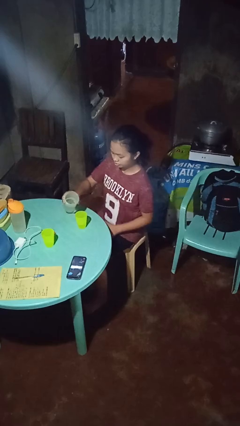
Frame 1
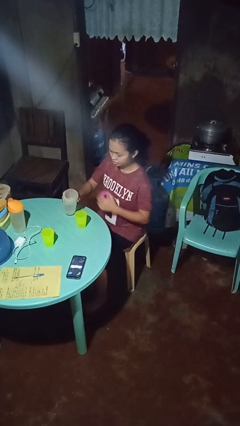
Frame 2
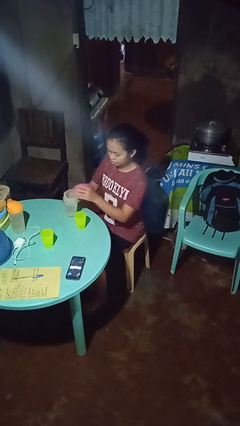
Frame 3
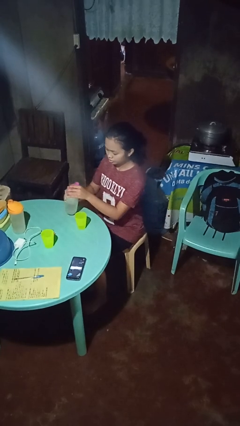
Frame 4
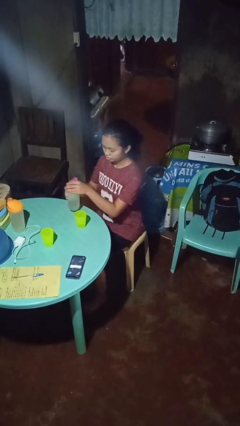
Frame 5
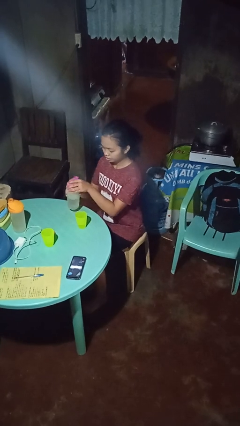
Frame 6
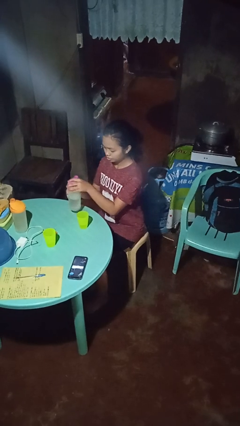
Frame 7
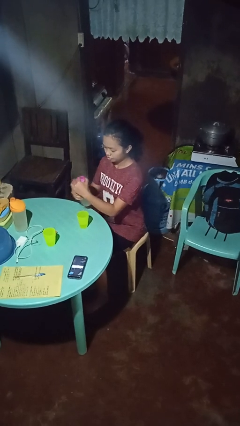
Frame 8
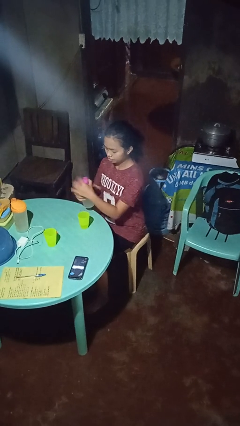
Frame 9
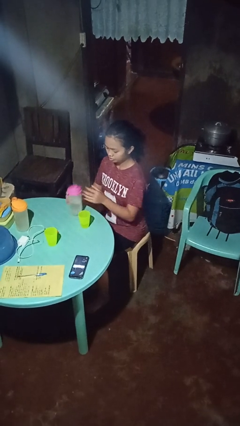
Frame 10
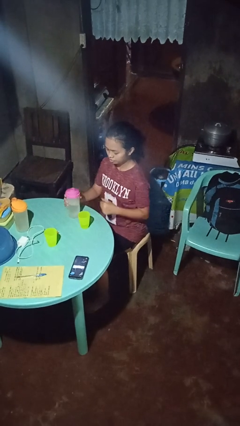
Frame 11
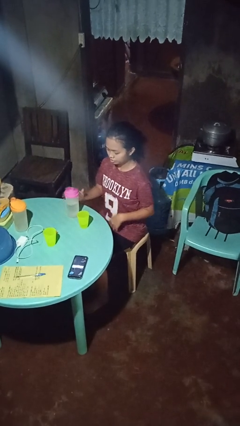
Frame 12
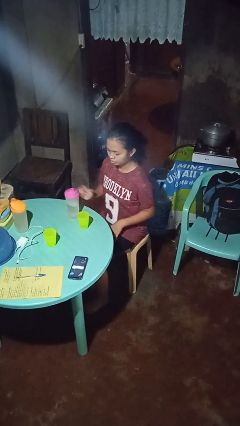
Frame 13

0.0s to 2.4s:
person screws lid to bottle

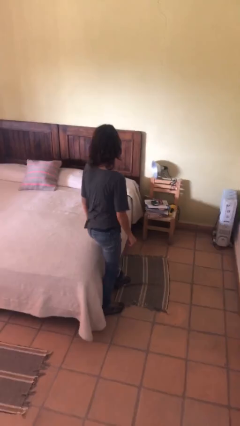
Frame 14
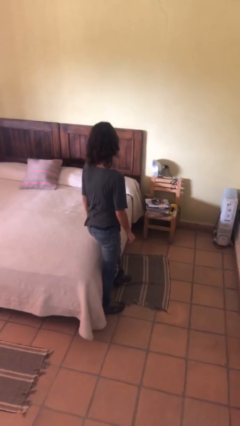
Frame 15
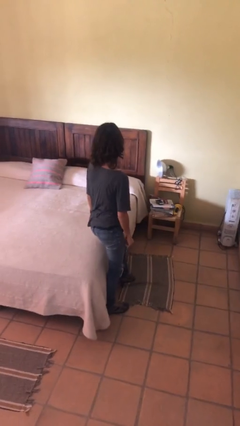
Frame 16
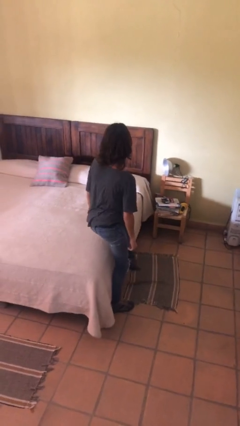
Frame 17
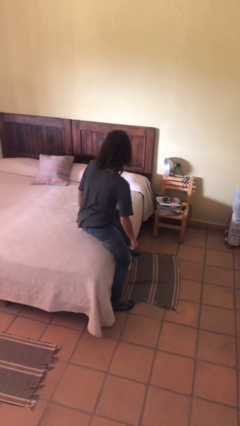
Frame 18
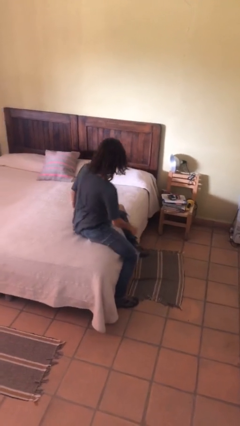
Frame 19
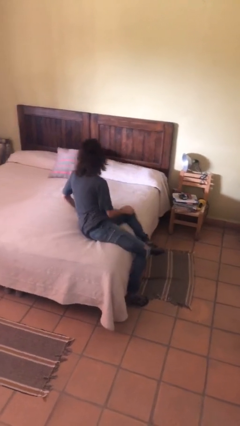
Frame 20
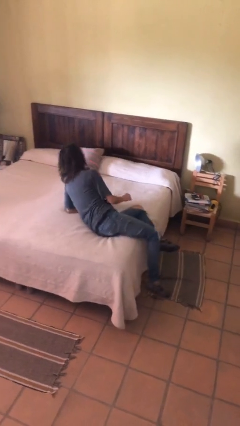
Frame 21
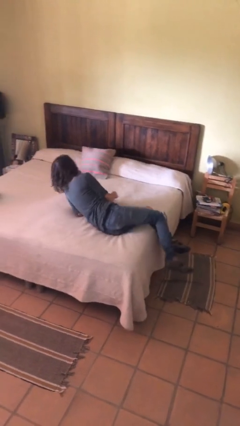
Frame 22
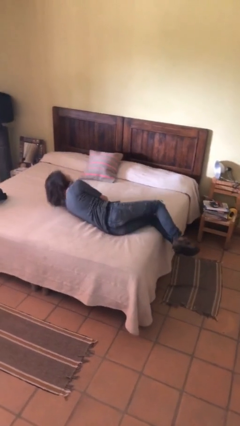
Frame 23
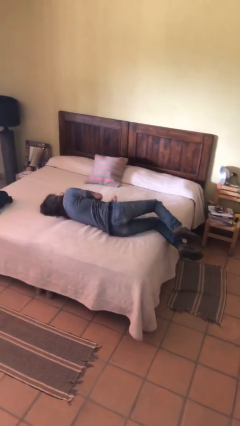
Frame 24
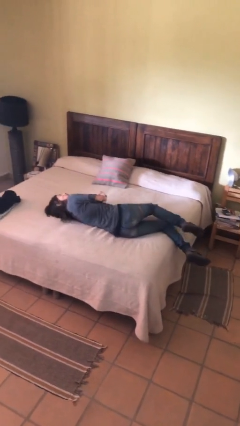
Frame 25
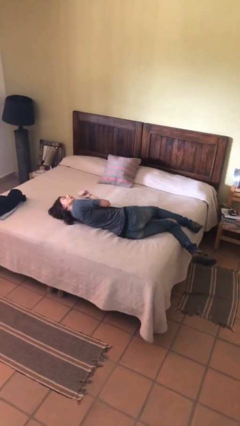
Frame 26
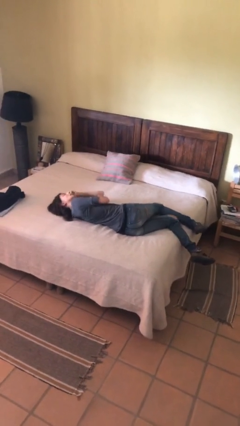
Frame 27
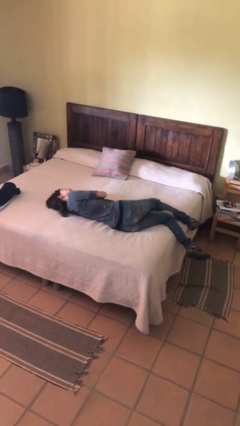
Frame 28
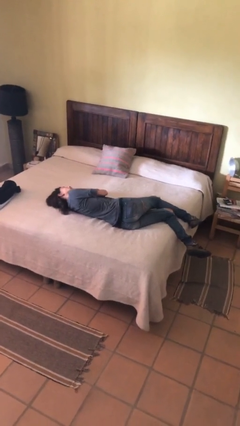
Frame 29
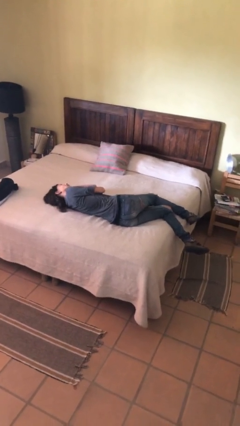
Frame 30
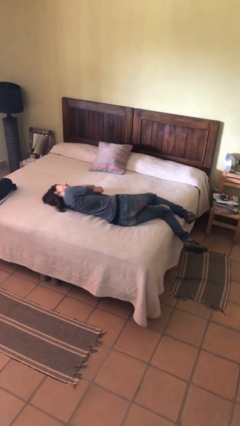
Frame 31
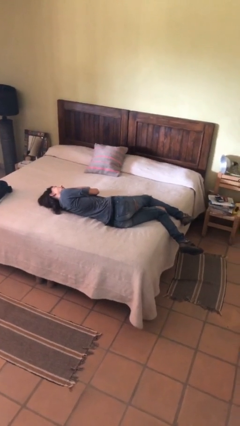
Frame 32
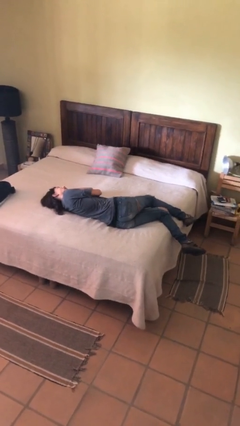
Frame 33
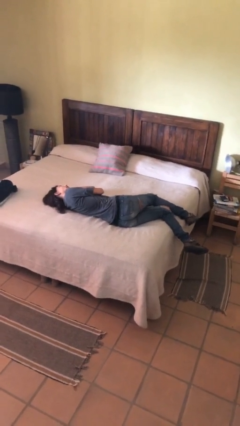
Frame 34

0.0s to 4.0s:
person lies down on bed

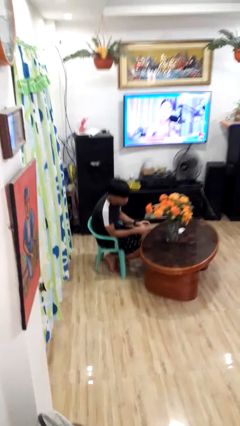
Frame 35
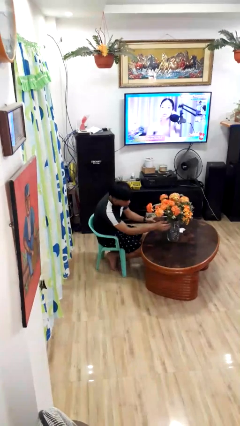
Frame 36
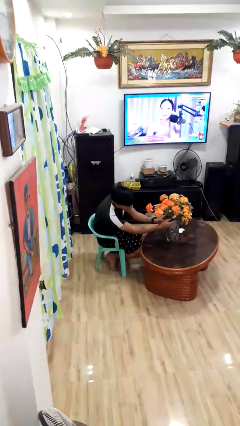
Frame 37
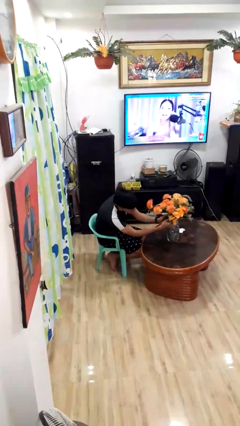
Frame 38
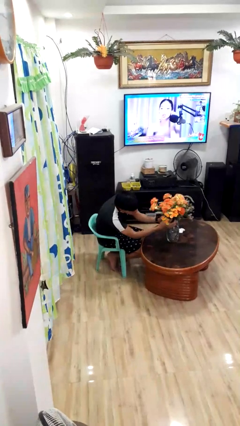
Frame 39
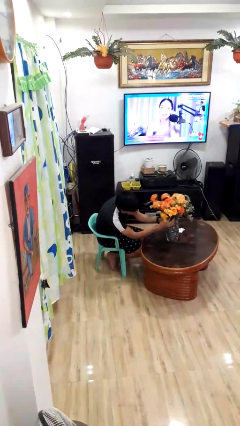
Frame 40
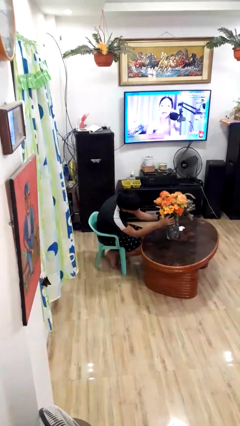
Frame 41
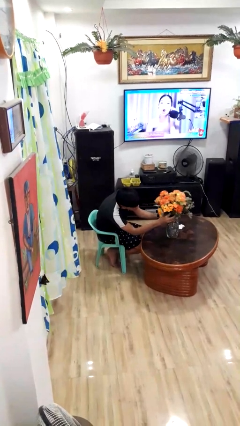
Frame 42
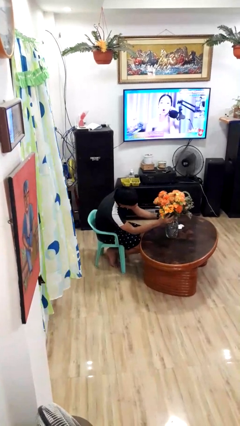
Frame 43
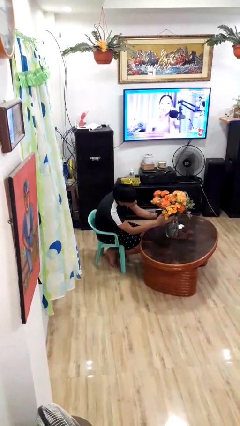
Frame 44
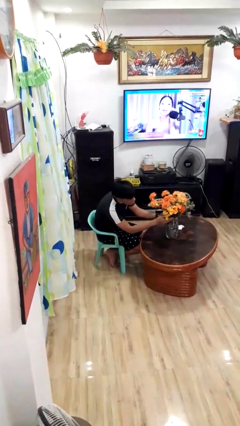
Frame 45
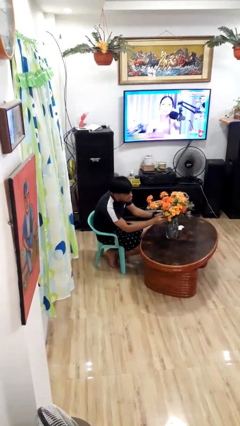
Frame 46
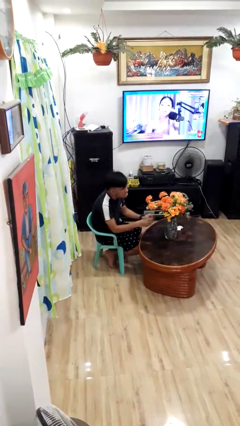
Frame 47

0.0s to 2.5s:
person arranges flowers in vase

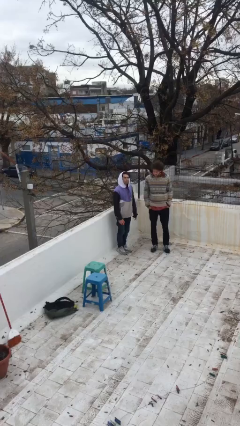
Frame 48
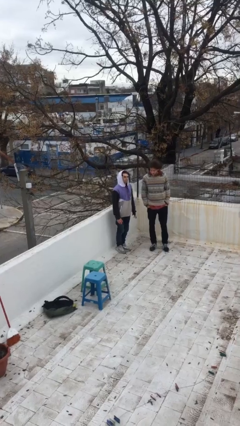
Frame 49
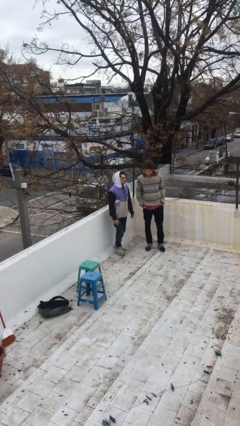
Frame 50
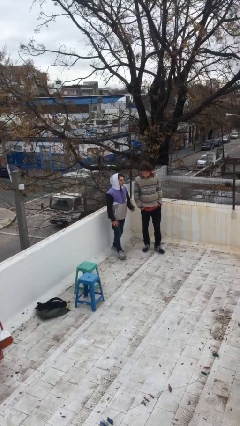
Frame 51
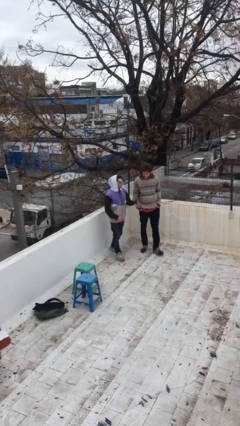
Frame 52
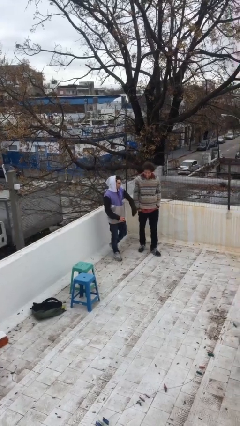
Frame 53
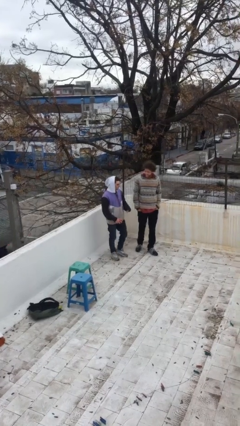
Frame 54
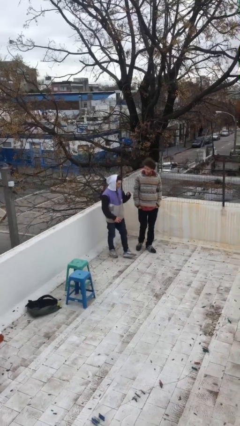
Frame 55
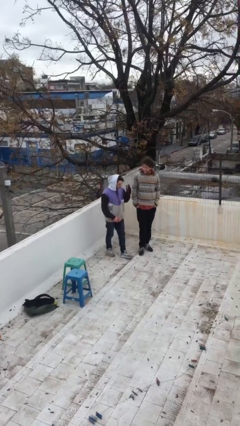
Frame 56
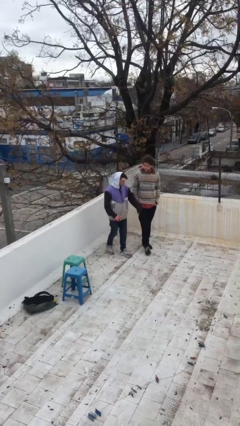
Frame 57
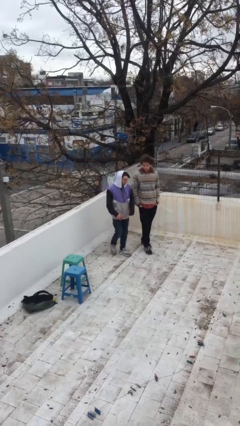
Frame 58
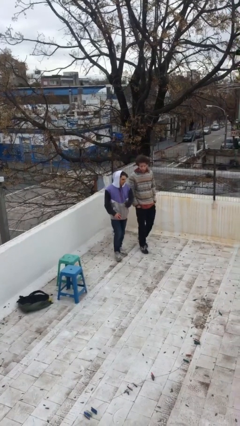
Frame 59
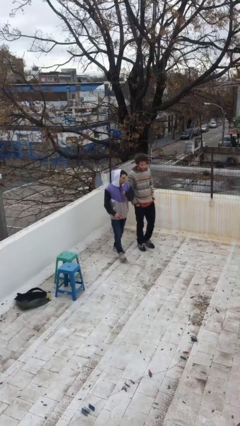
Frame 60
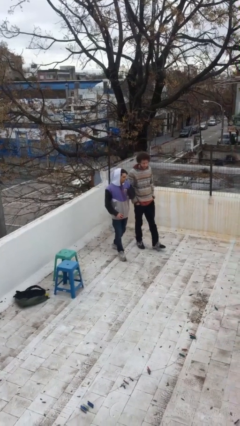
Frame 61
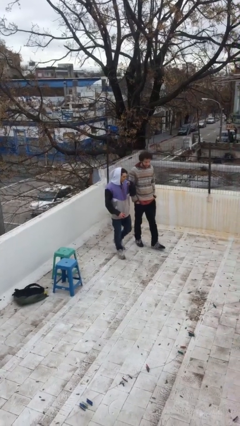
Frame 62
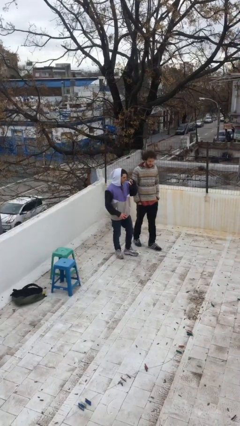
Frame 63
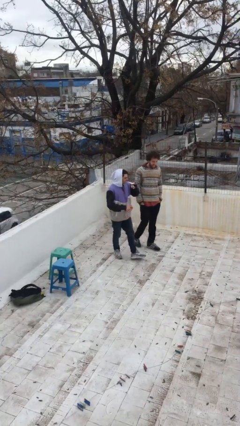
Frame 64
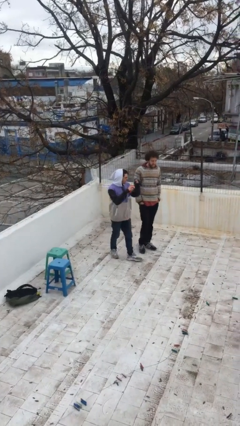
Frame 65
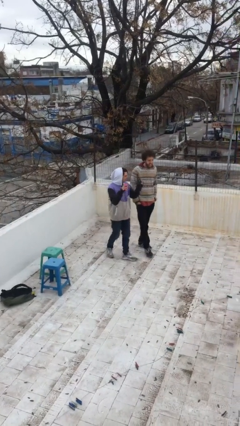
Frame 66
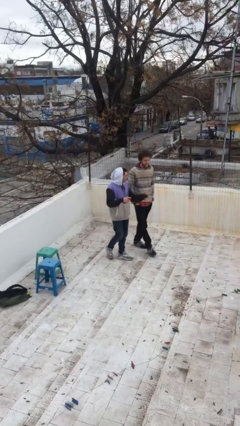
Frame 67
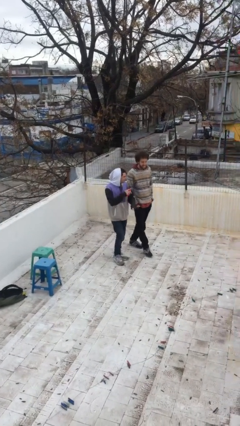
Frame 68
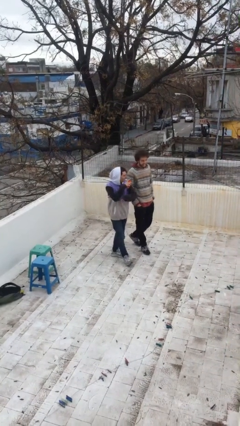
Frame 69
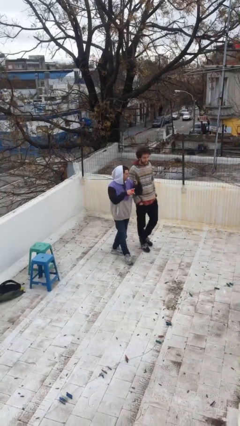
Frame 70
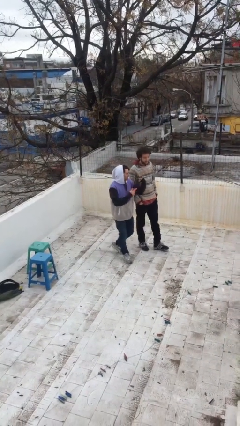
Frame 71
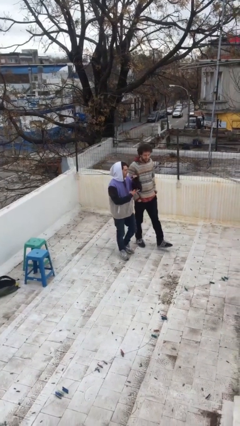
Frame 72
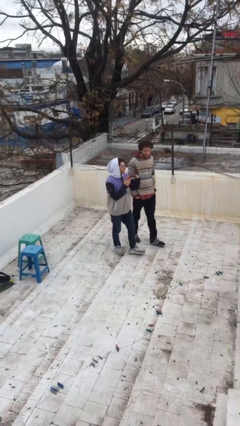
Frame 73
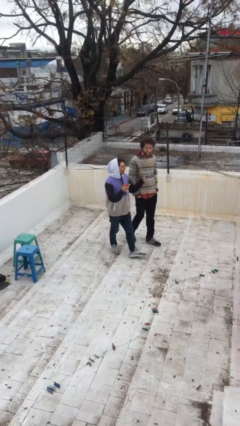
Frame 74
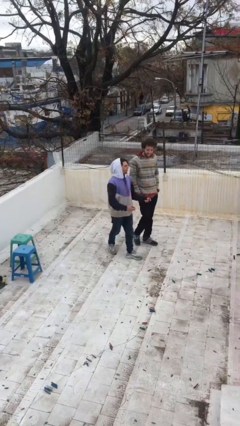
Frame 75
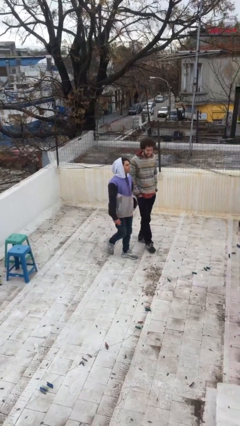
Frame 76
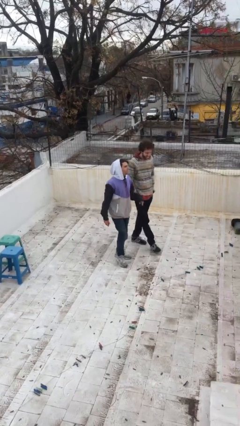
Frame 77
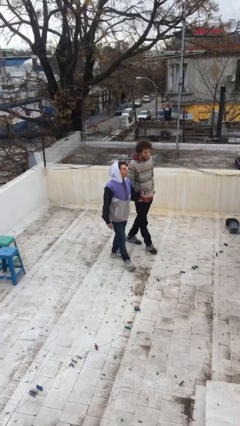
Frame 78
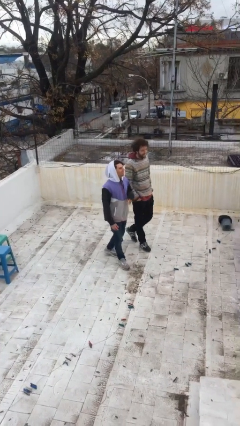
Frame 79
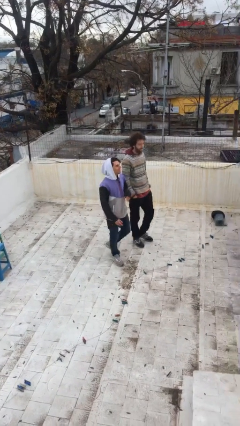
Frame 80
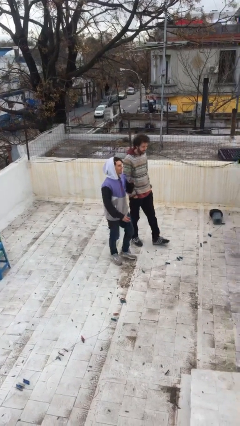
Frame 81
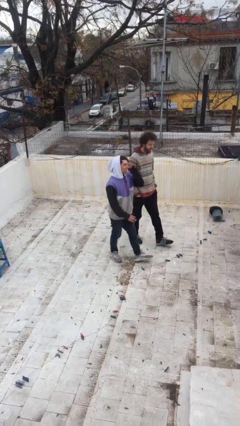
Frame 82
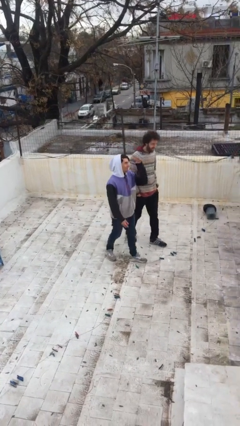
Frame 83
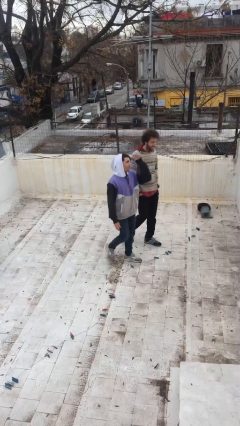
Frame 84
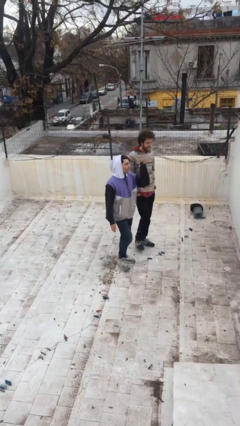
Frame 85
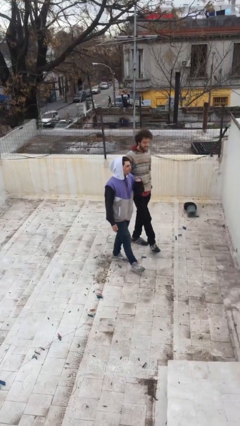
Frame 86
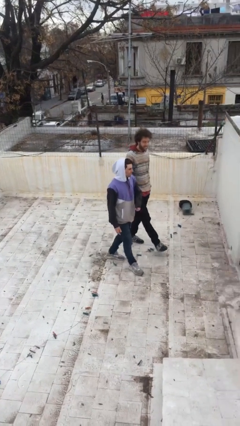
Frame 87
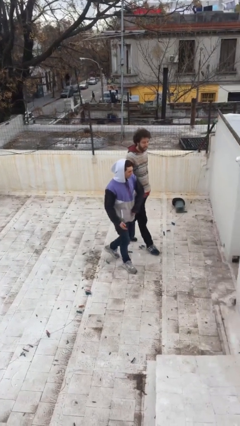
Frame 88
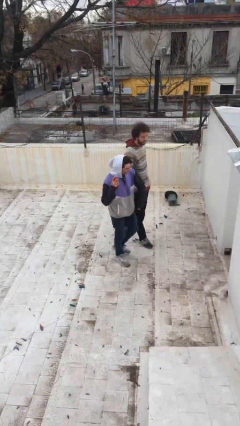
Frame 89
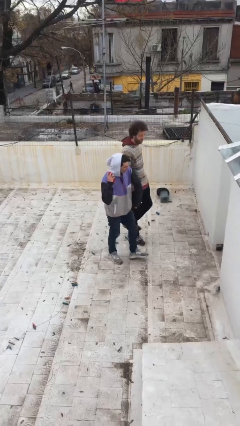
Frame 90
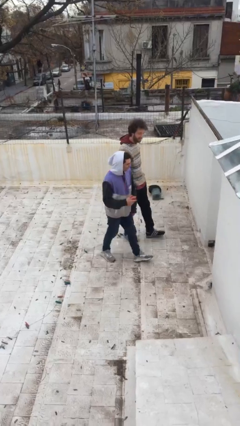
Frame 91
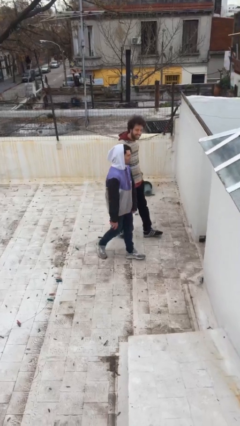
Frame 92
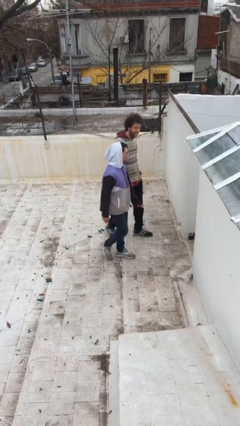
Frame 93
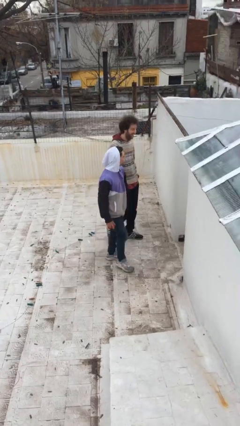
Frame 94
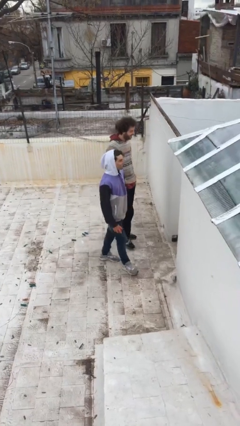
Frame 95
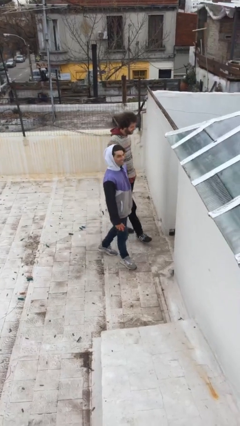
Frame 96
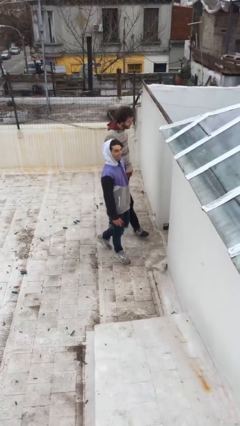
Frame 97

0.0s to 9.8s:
person talks to person
